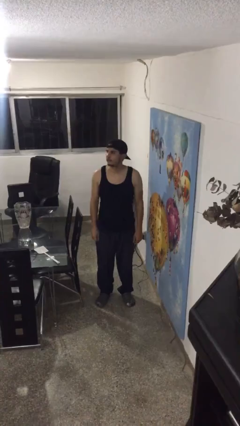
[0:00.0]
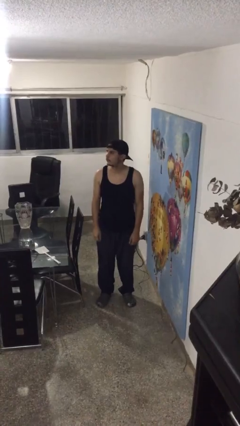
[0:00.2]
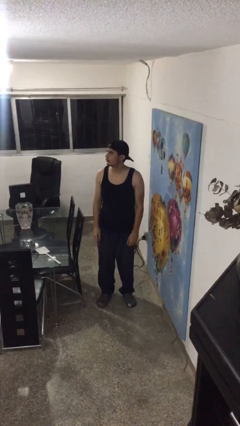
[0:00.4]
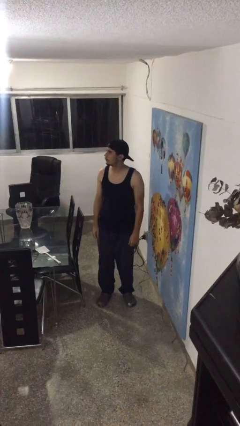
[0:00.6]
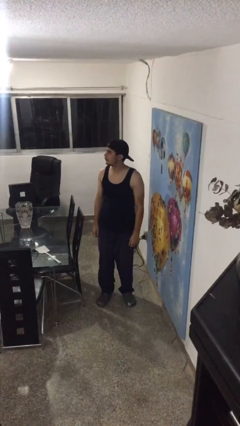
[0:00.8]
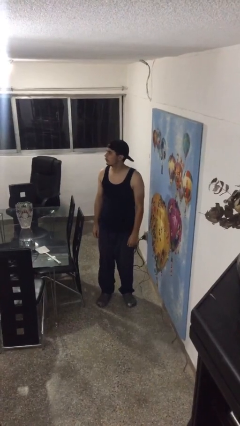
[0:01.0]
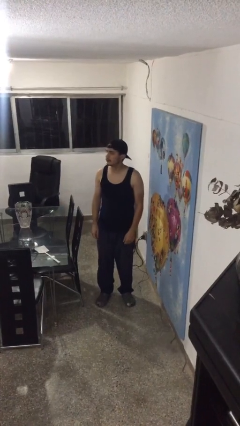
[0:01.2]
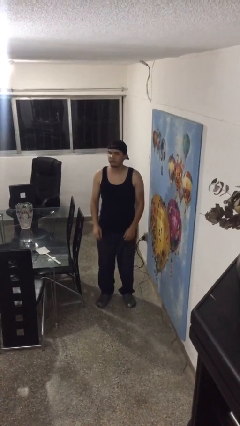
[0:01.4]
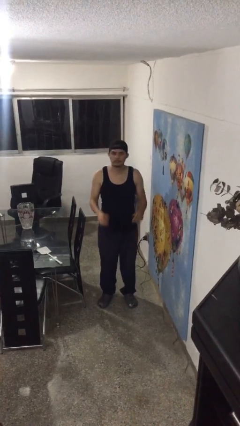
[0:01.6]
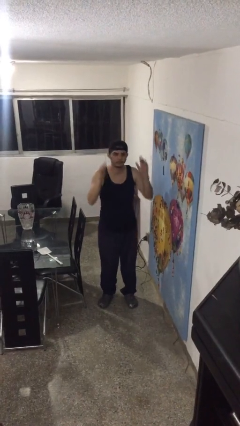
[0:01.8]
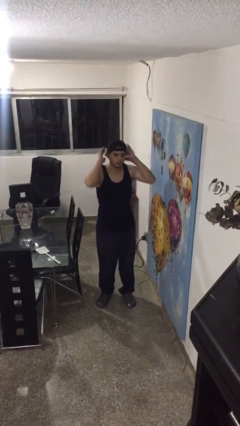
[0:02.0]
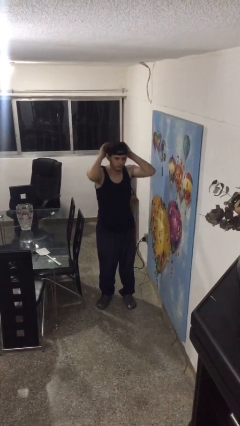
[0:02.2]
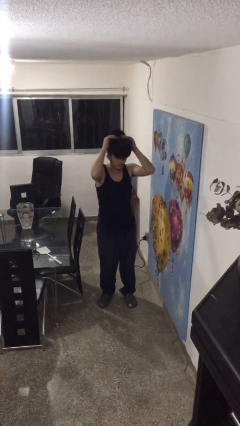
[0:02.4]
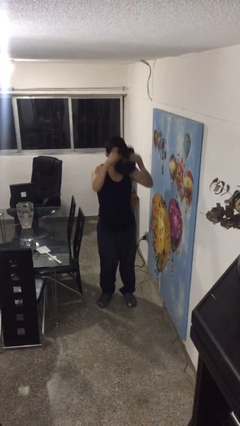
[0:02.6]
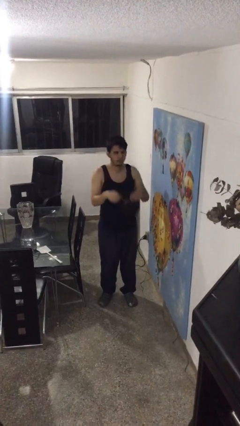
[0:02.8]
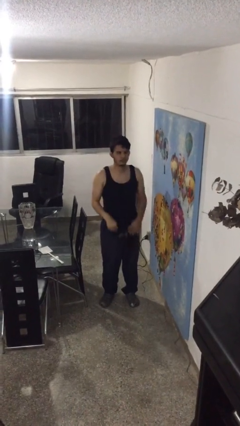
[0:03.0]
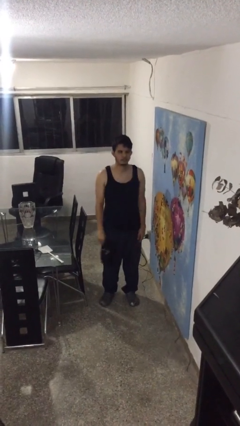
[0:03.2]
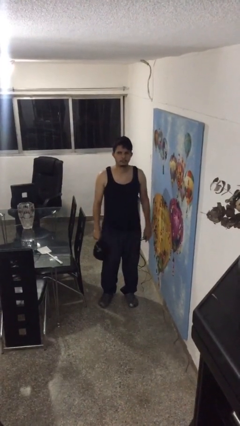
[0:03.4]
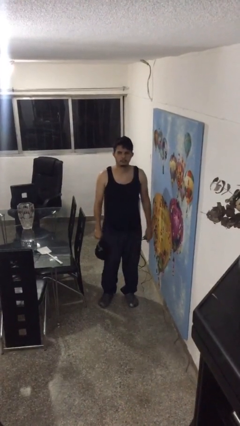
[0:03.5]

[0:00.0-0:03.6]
person takes off hat

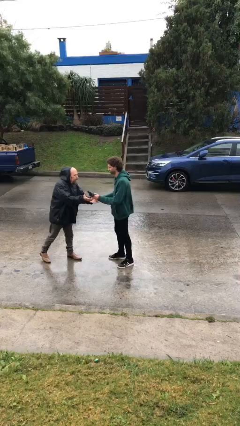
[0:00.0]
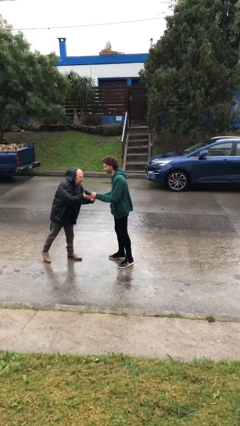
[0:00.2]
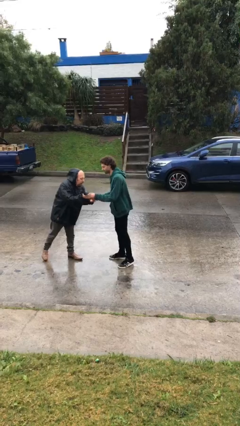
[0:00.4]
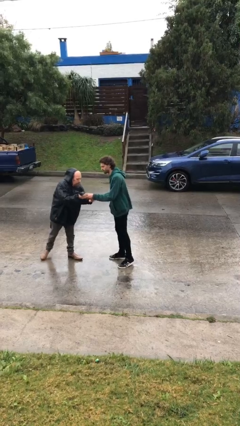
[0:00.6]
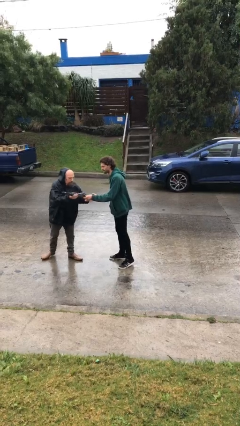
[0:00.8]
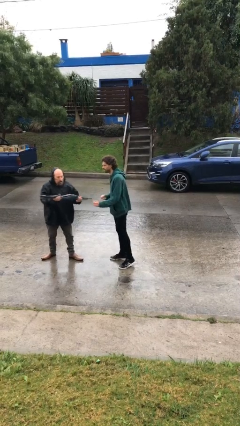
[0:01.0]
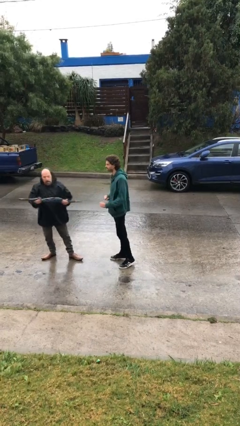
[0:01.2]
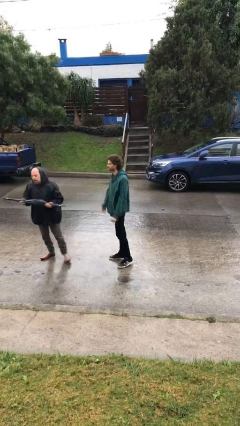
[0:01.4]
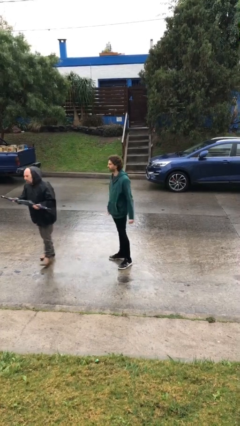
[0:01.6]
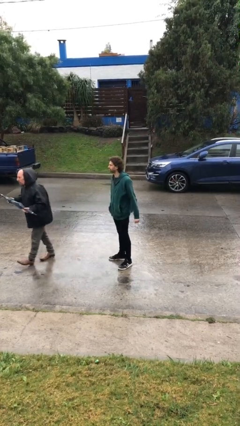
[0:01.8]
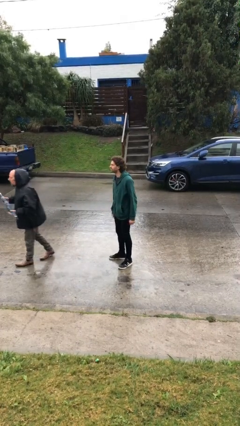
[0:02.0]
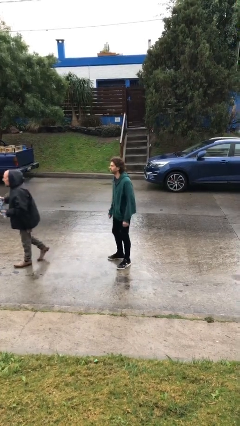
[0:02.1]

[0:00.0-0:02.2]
person transfers object to person

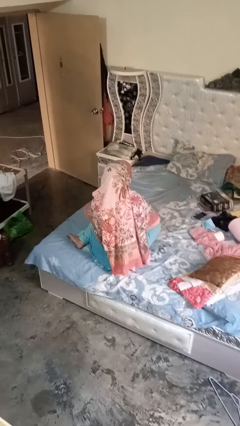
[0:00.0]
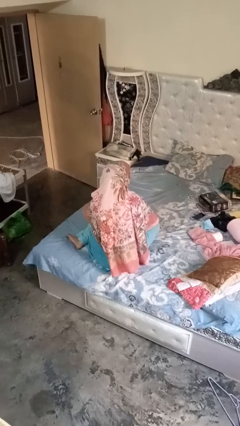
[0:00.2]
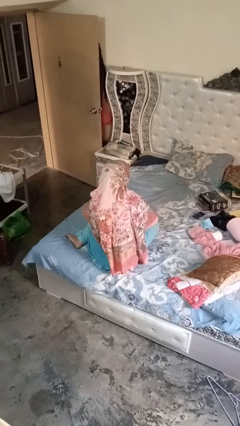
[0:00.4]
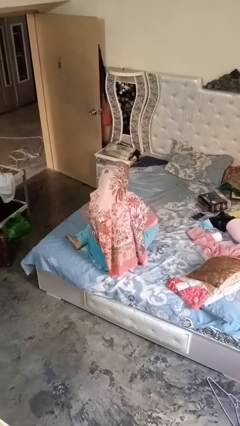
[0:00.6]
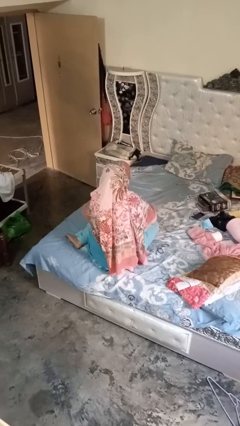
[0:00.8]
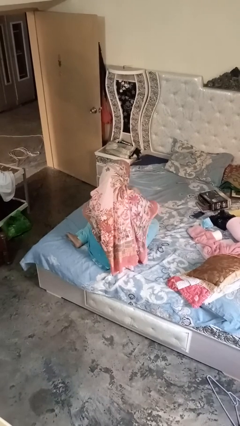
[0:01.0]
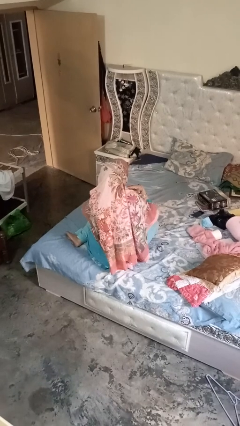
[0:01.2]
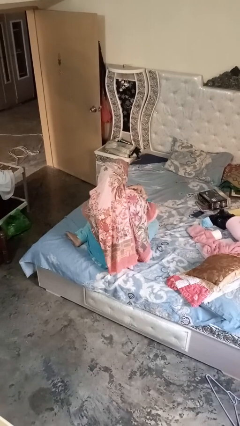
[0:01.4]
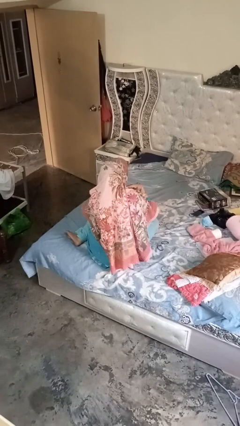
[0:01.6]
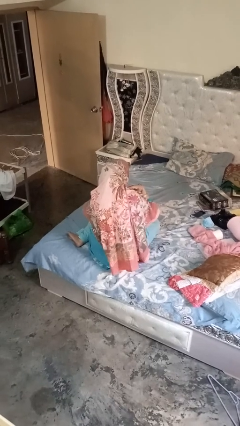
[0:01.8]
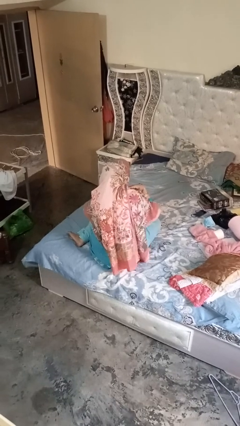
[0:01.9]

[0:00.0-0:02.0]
person gestures cut

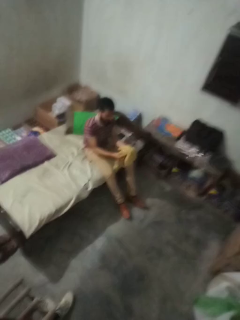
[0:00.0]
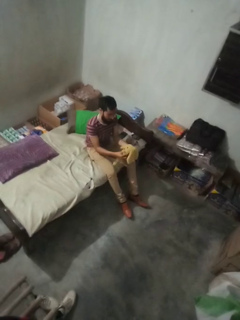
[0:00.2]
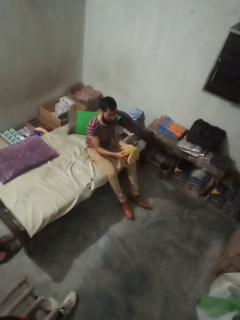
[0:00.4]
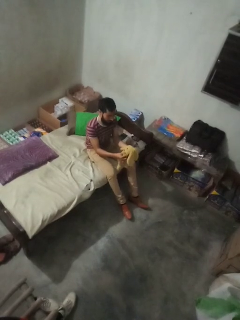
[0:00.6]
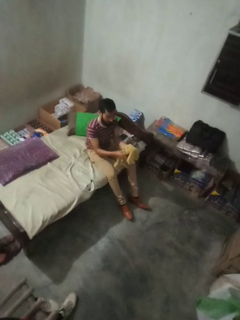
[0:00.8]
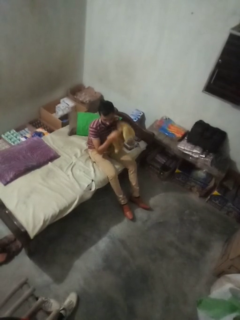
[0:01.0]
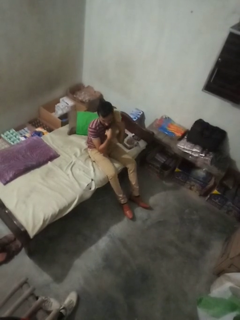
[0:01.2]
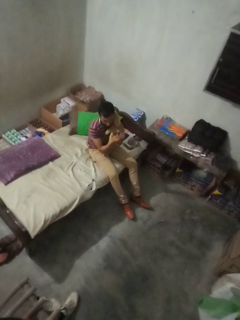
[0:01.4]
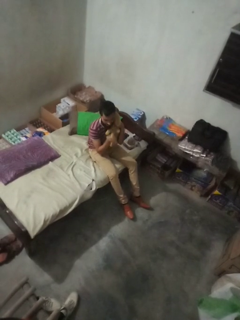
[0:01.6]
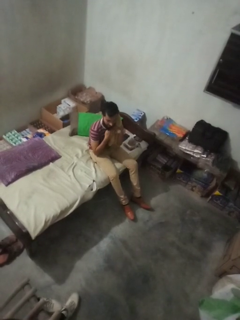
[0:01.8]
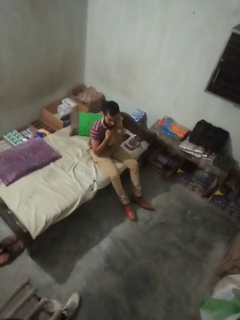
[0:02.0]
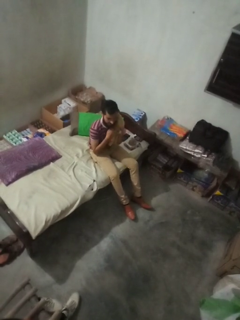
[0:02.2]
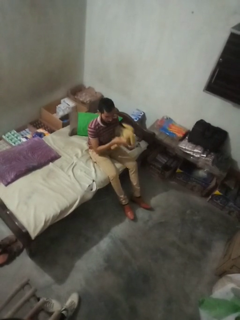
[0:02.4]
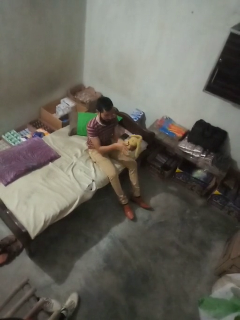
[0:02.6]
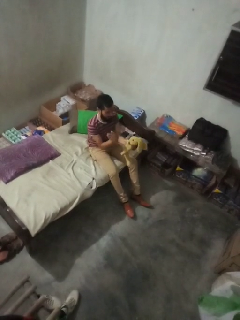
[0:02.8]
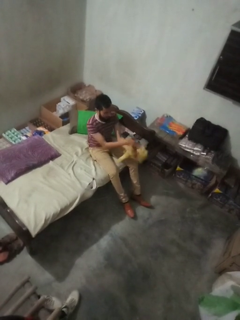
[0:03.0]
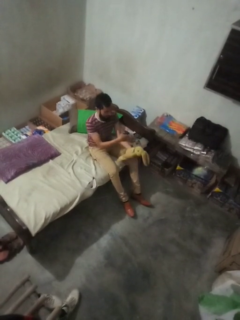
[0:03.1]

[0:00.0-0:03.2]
person hugs stuffed animal

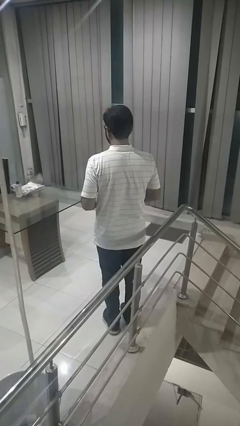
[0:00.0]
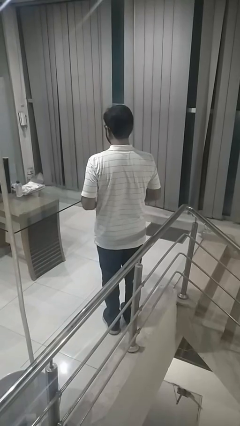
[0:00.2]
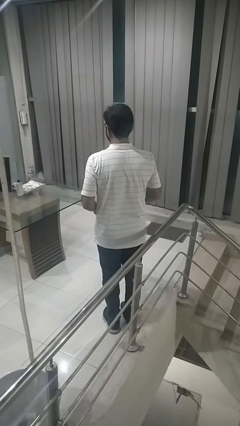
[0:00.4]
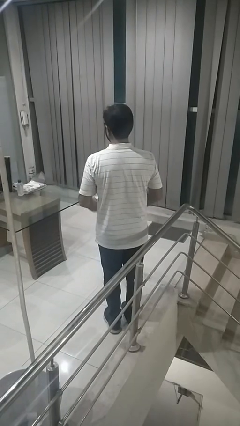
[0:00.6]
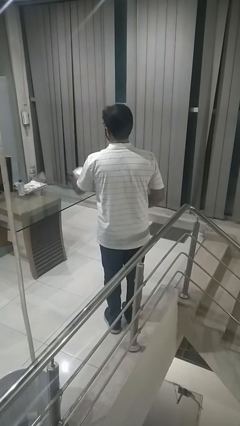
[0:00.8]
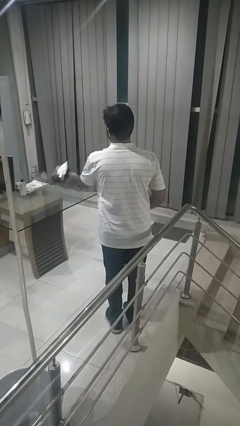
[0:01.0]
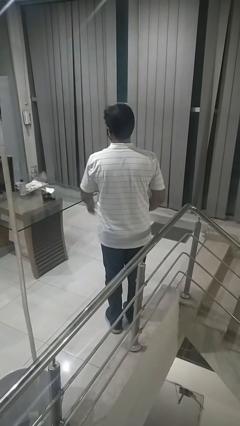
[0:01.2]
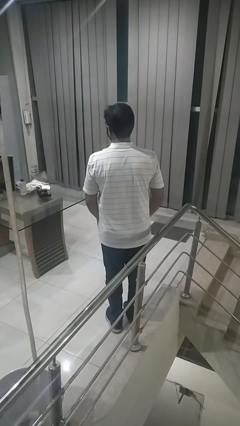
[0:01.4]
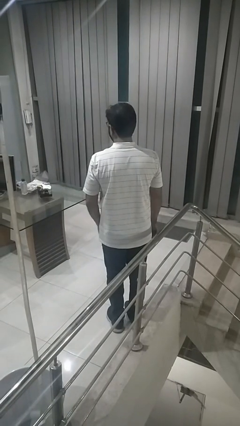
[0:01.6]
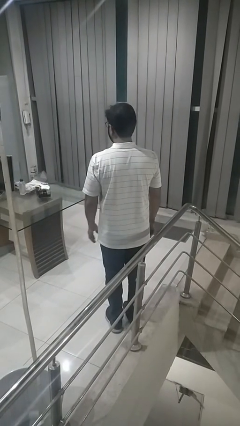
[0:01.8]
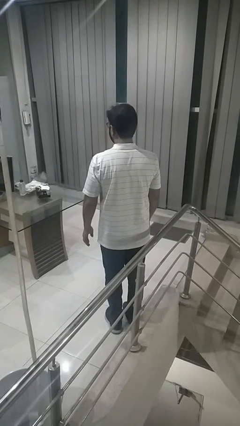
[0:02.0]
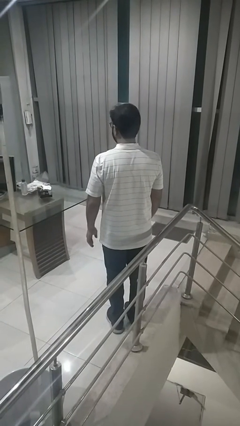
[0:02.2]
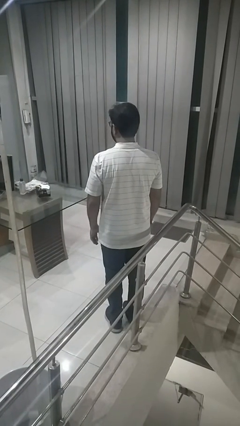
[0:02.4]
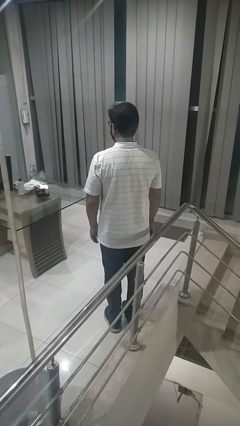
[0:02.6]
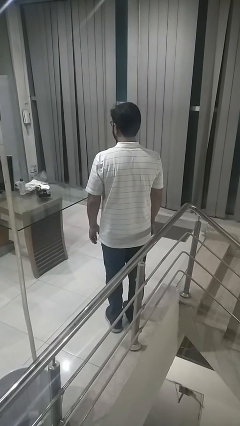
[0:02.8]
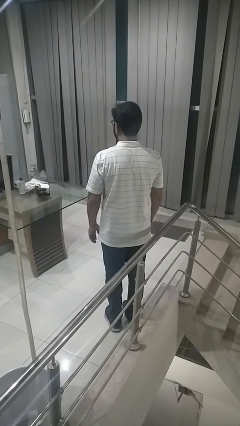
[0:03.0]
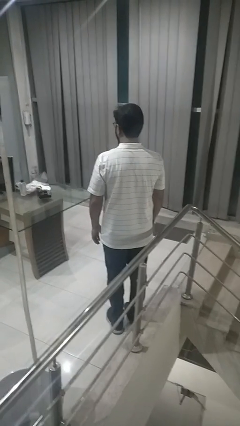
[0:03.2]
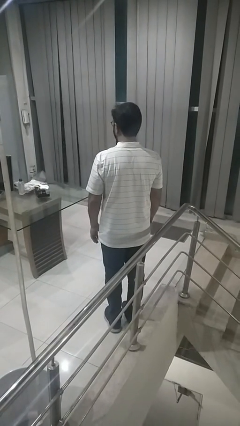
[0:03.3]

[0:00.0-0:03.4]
person throws object on table

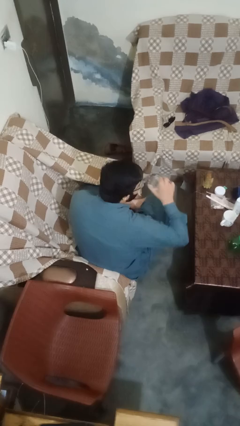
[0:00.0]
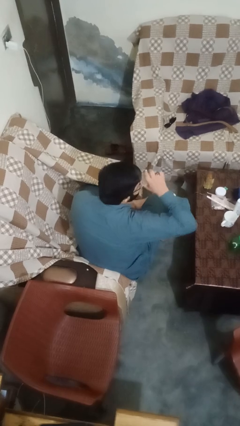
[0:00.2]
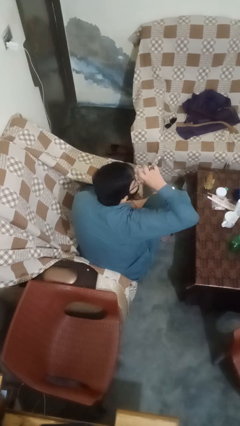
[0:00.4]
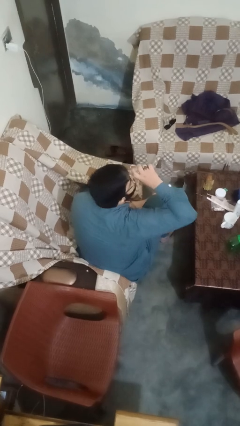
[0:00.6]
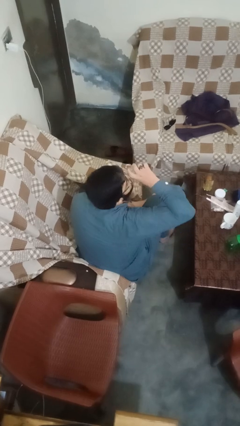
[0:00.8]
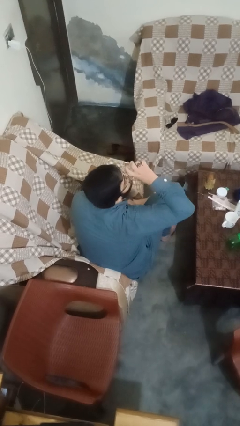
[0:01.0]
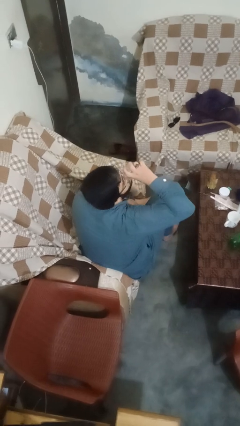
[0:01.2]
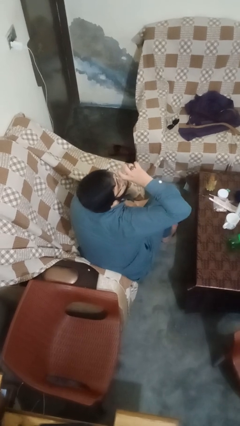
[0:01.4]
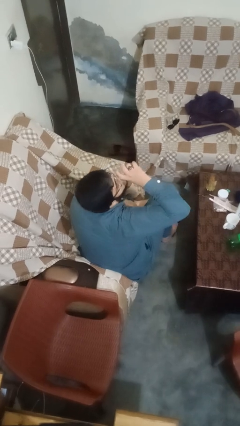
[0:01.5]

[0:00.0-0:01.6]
person drinks from shotglass

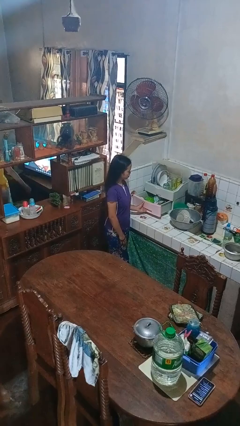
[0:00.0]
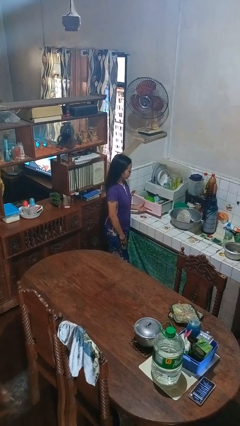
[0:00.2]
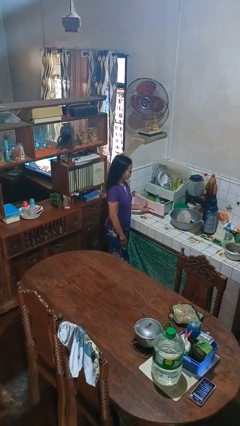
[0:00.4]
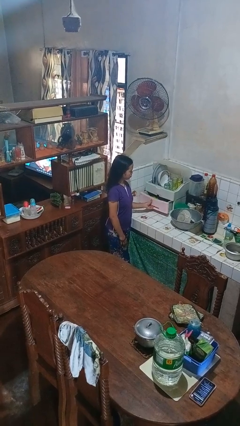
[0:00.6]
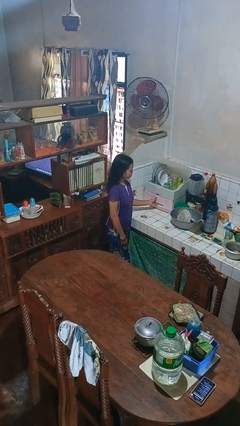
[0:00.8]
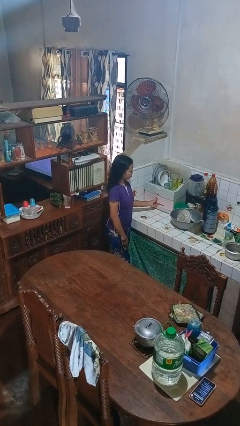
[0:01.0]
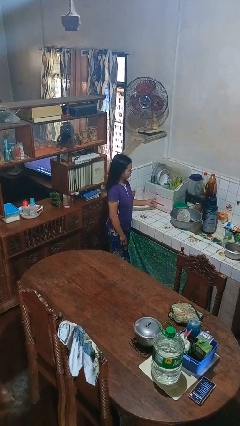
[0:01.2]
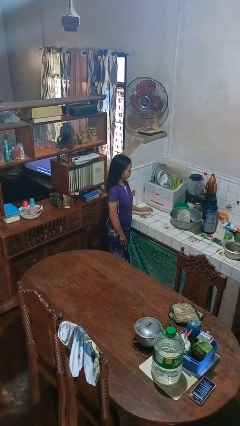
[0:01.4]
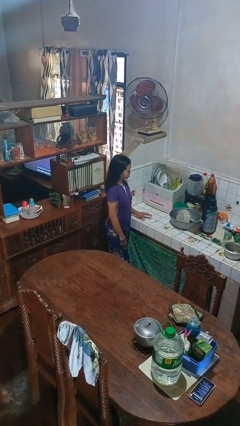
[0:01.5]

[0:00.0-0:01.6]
person closes kitchen drawer

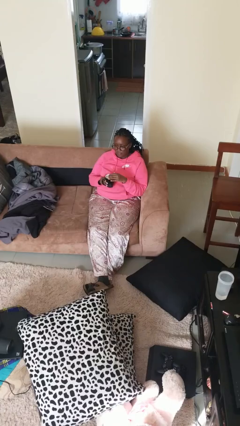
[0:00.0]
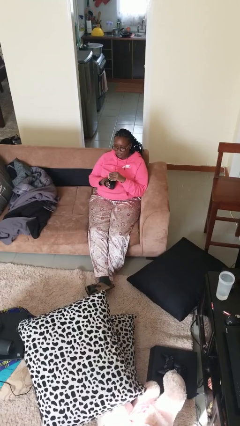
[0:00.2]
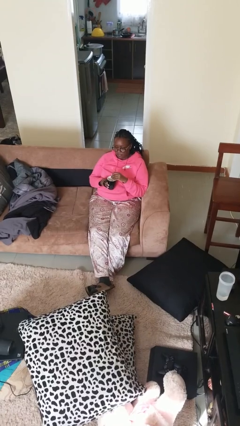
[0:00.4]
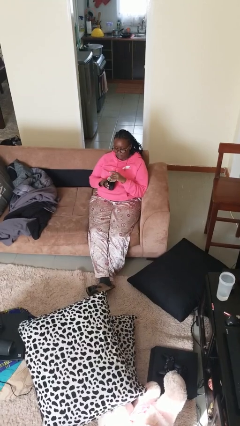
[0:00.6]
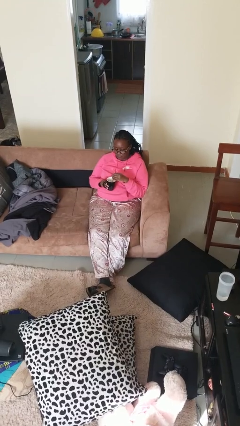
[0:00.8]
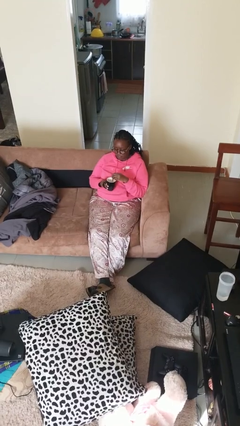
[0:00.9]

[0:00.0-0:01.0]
person stirs mug
